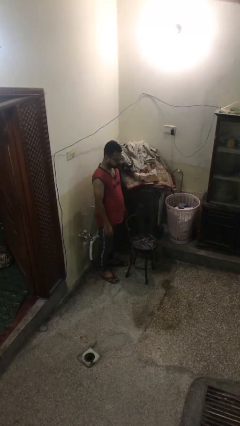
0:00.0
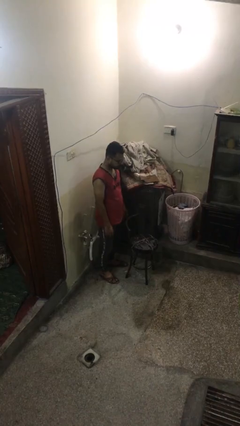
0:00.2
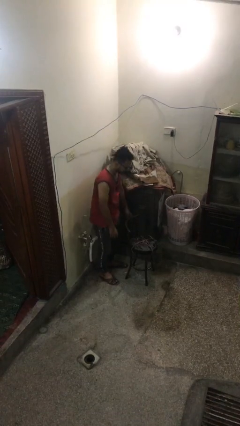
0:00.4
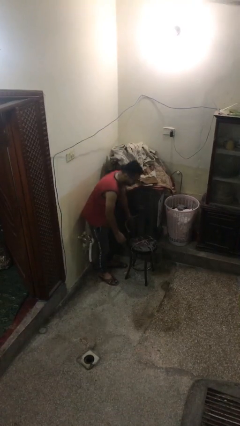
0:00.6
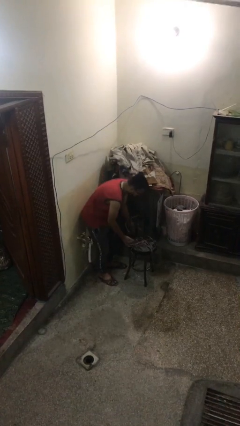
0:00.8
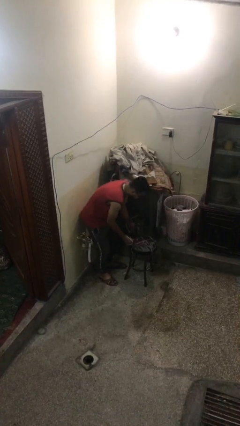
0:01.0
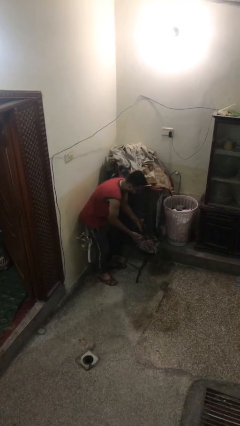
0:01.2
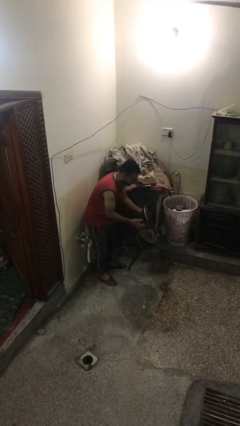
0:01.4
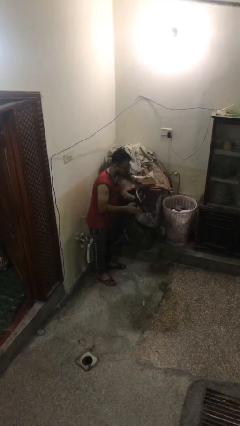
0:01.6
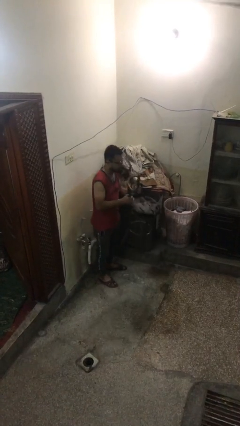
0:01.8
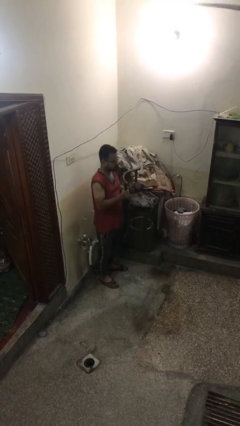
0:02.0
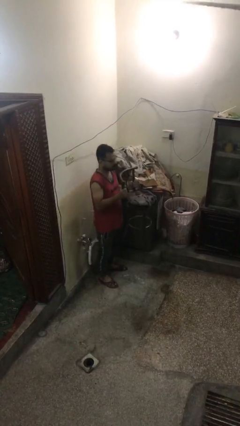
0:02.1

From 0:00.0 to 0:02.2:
person picks up object from floor

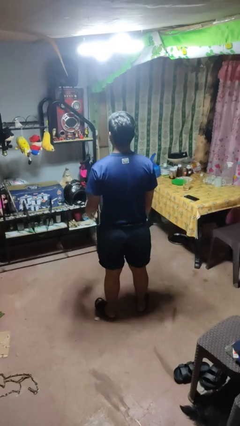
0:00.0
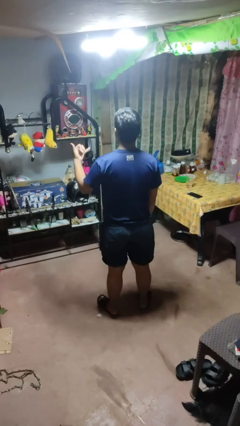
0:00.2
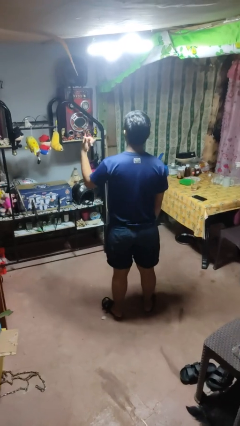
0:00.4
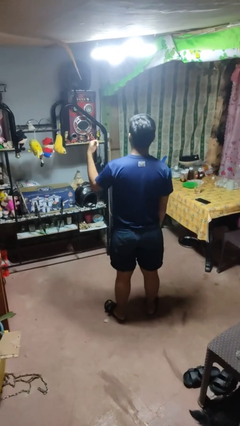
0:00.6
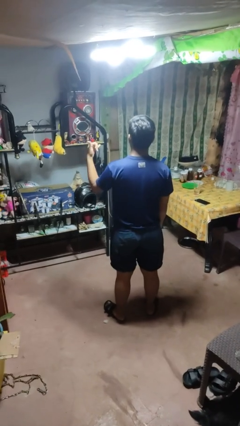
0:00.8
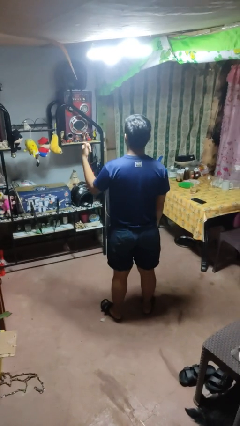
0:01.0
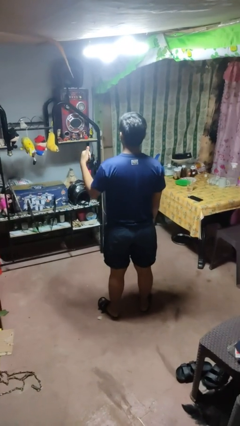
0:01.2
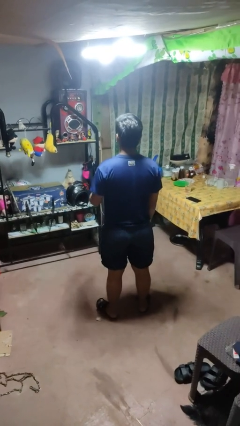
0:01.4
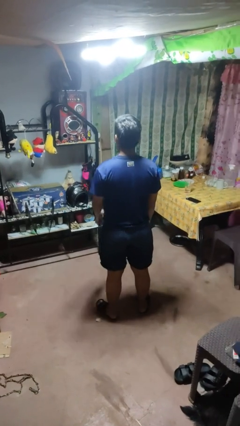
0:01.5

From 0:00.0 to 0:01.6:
person gestures hang loose

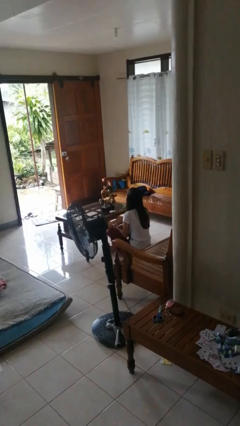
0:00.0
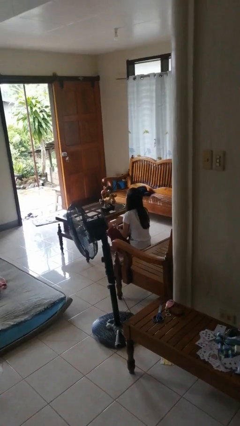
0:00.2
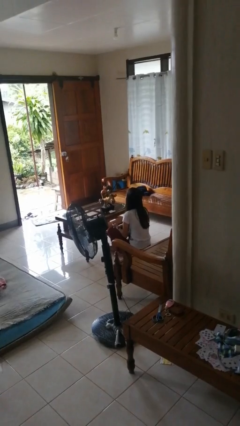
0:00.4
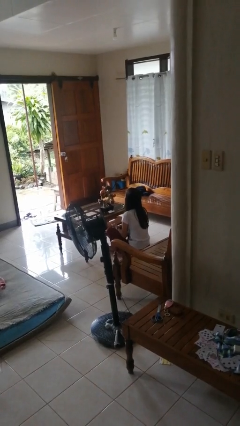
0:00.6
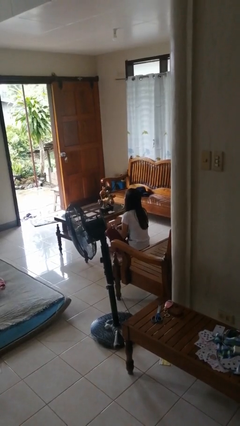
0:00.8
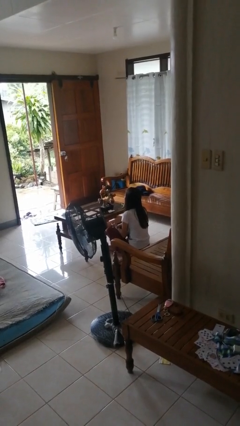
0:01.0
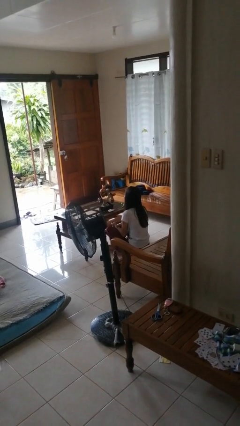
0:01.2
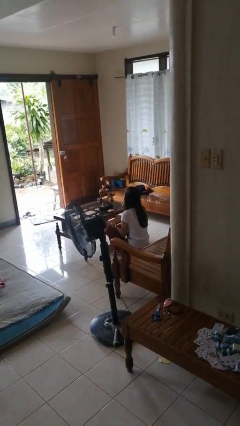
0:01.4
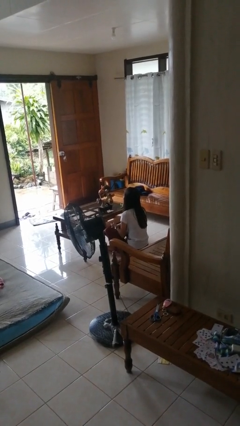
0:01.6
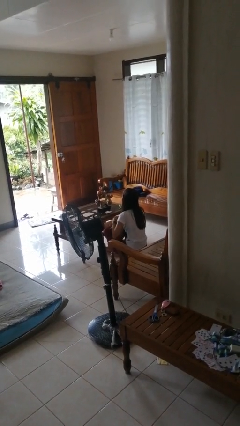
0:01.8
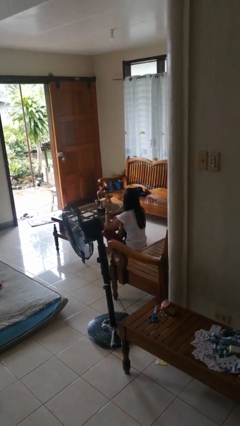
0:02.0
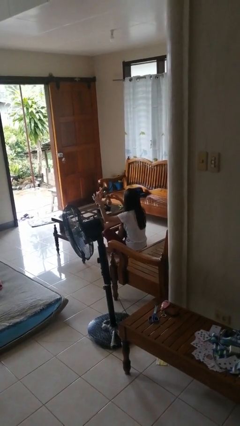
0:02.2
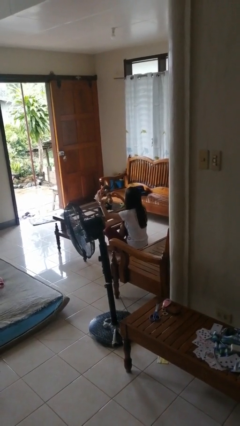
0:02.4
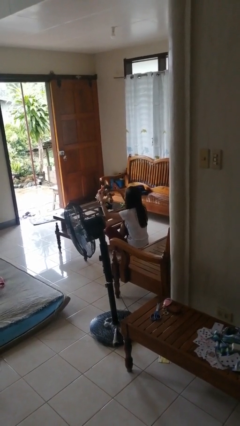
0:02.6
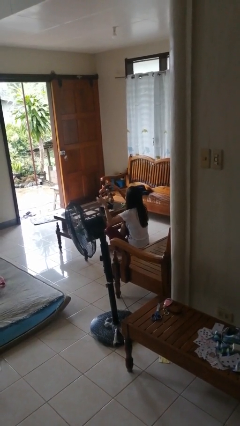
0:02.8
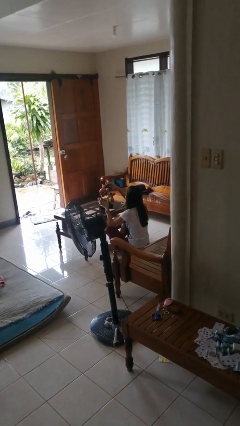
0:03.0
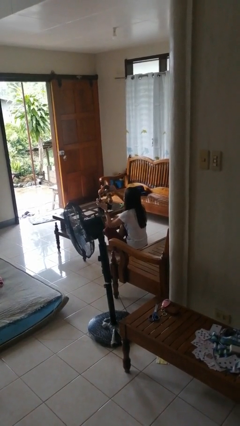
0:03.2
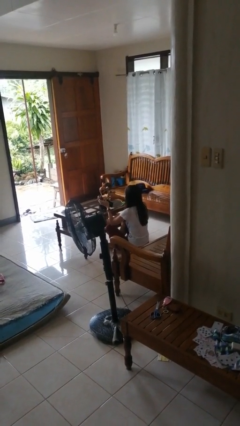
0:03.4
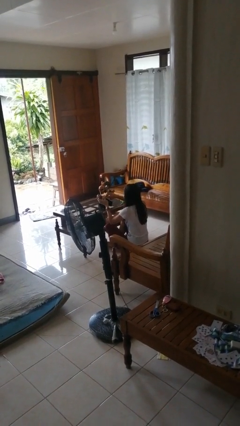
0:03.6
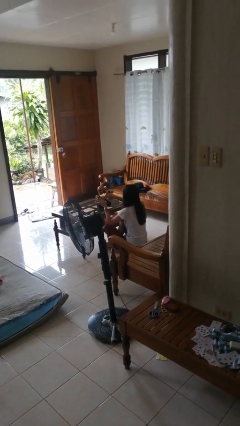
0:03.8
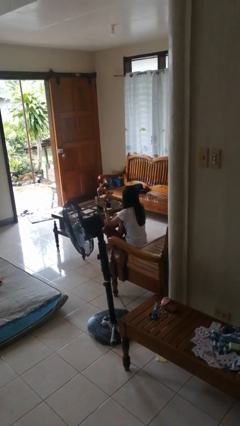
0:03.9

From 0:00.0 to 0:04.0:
person arranges flowers in vase

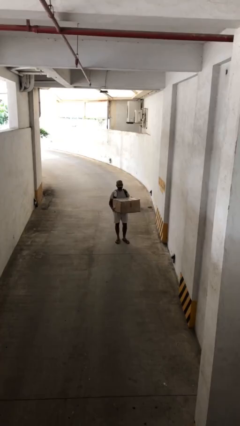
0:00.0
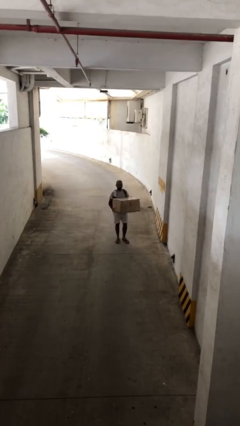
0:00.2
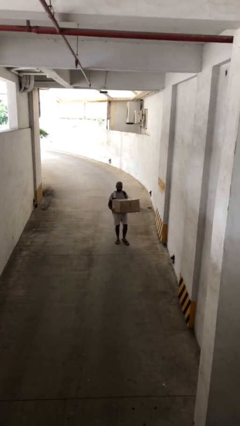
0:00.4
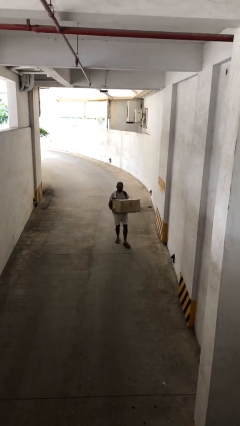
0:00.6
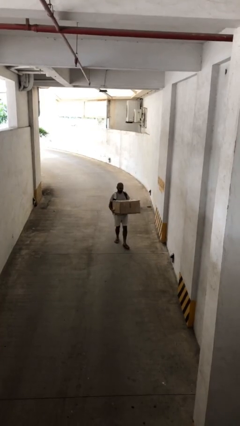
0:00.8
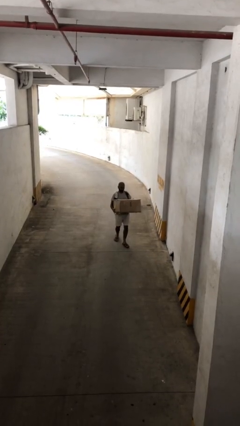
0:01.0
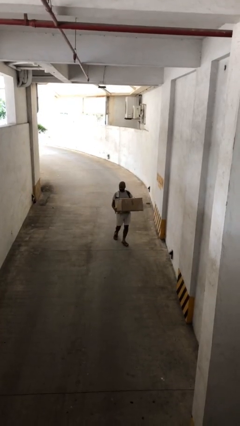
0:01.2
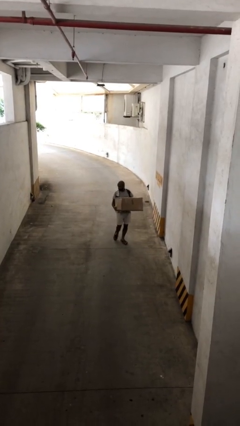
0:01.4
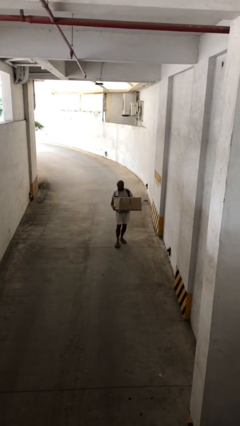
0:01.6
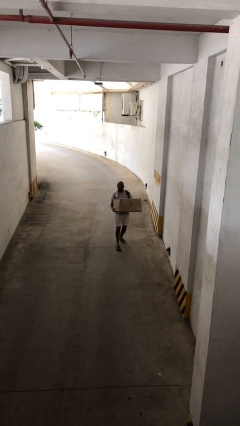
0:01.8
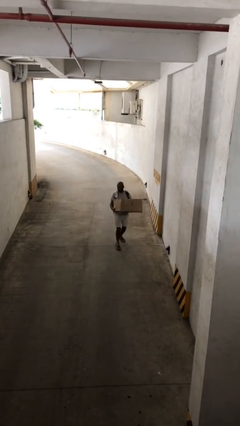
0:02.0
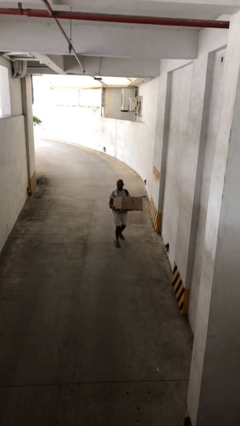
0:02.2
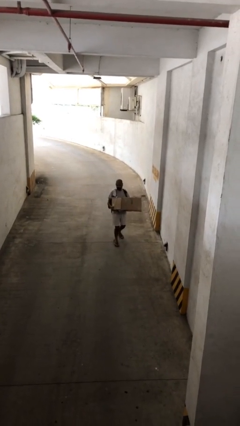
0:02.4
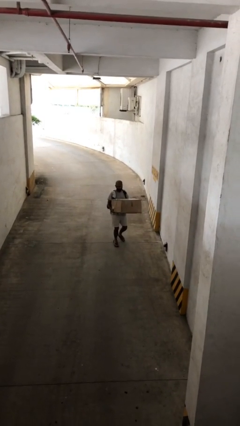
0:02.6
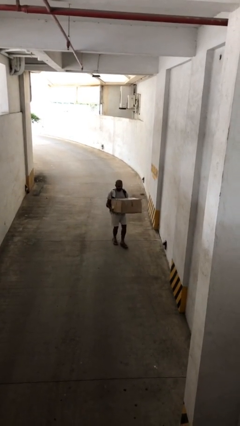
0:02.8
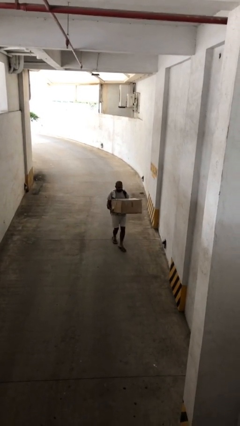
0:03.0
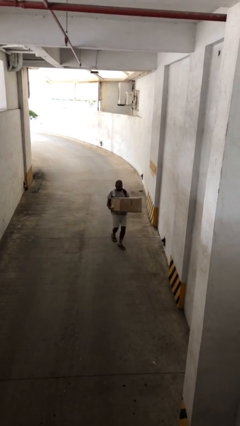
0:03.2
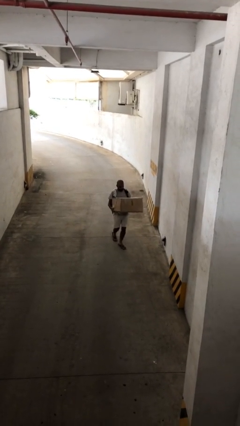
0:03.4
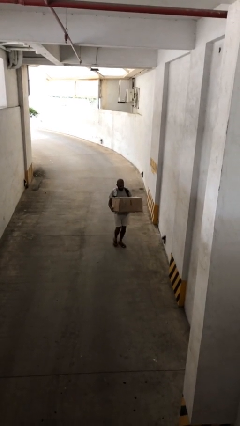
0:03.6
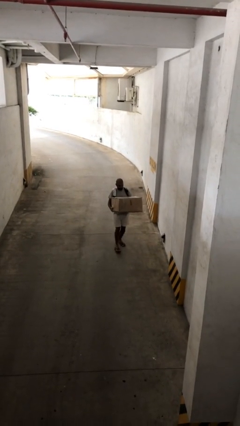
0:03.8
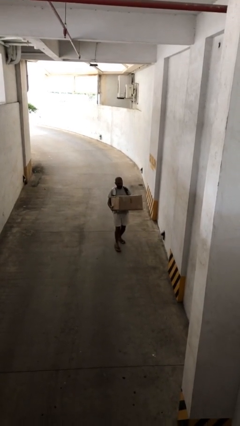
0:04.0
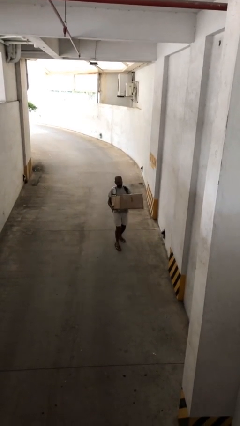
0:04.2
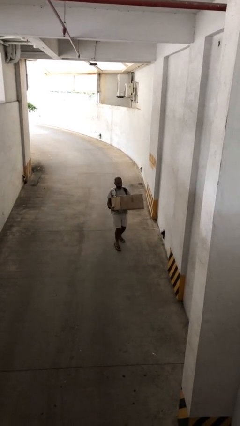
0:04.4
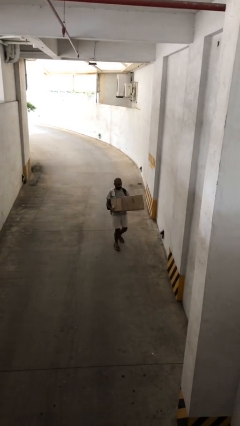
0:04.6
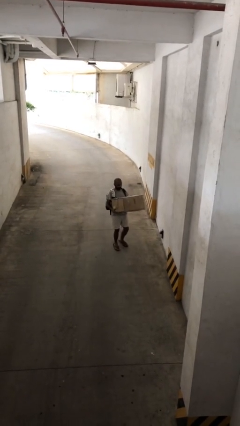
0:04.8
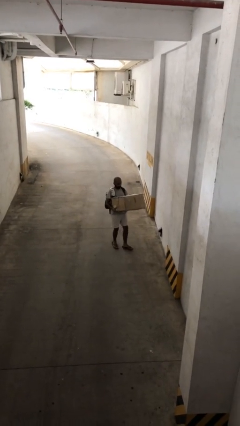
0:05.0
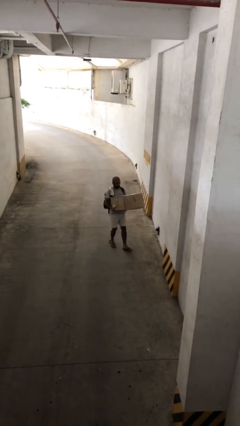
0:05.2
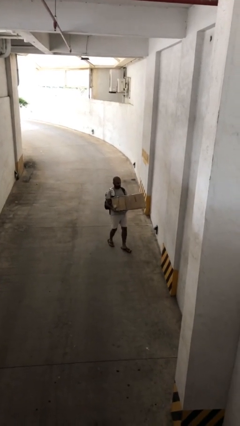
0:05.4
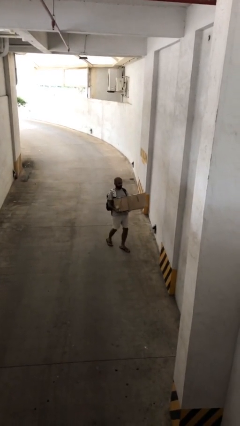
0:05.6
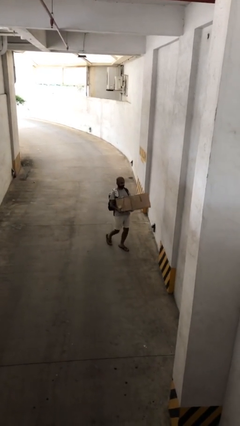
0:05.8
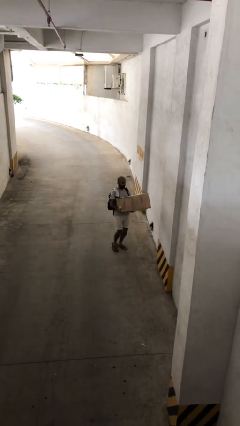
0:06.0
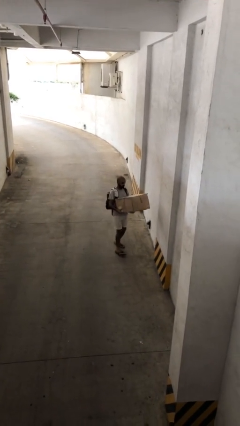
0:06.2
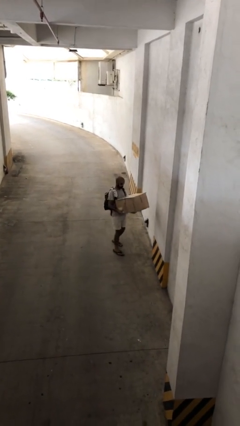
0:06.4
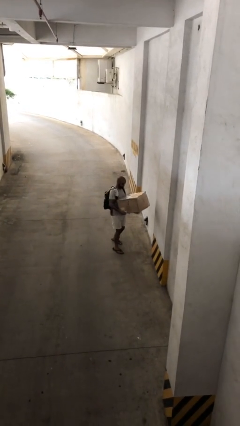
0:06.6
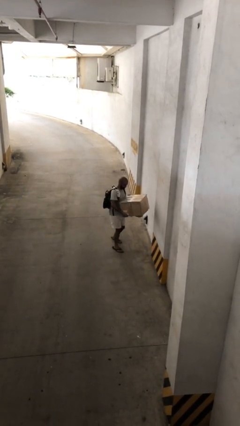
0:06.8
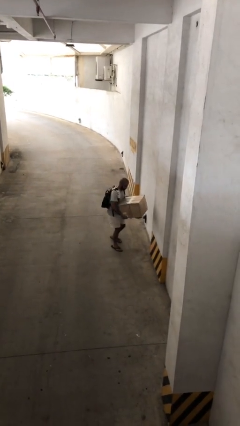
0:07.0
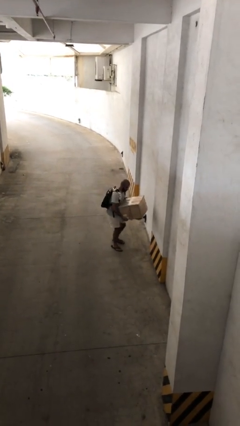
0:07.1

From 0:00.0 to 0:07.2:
person carries heavy object

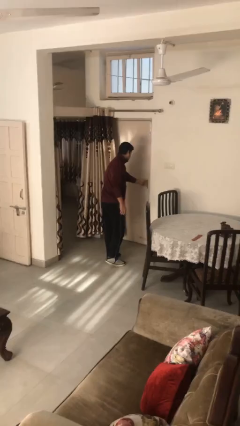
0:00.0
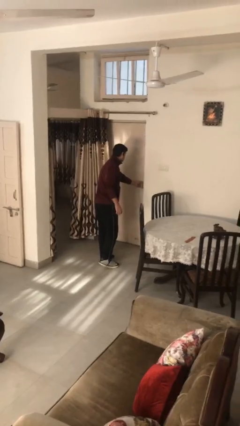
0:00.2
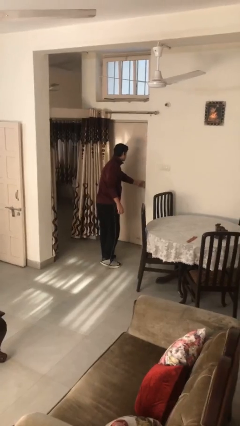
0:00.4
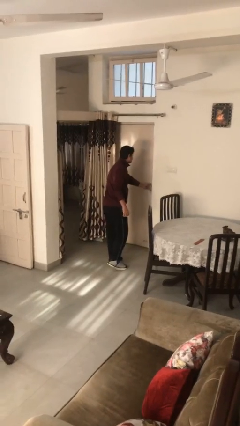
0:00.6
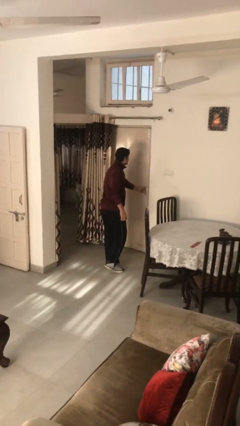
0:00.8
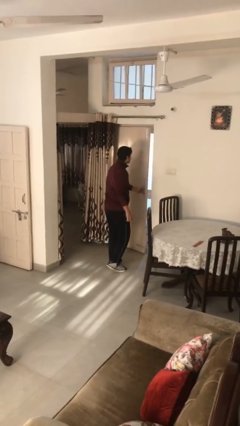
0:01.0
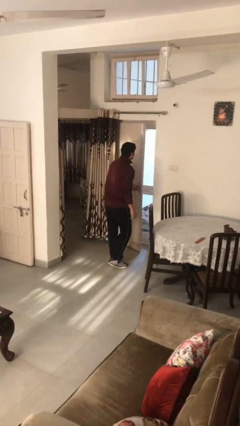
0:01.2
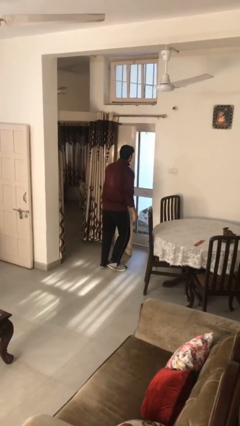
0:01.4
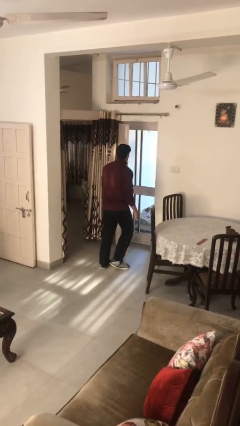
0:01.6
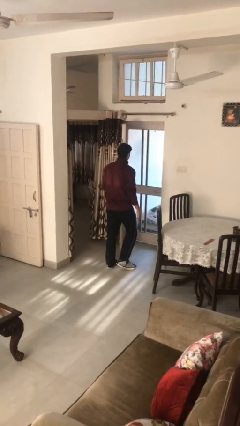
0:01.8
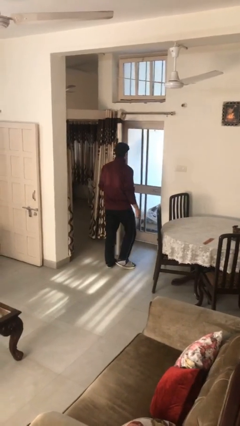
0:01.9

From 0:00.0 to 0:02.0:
person opens facility door

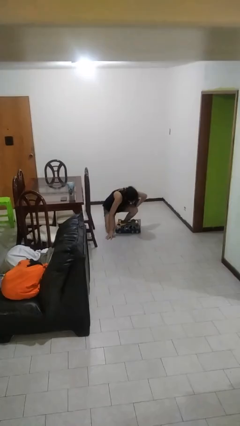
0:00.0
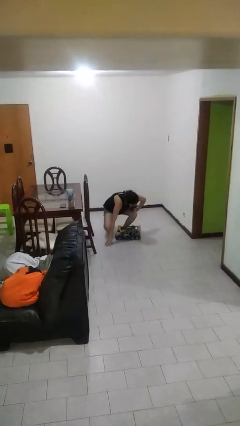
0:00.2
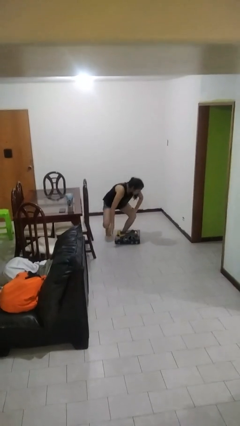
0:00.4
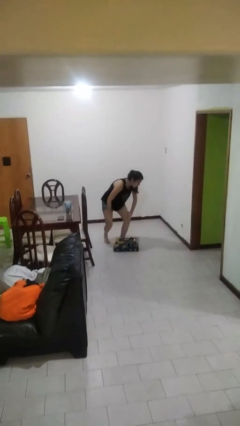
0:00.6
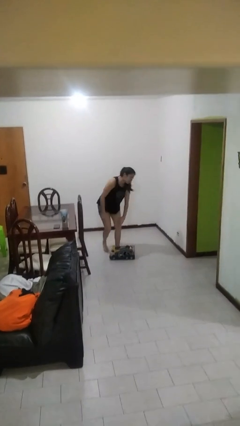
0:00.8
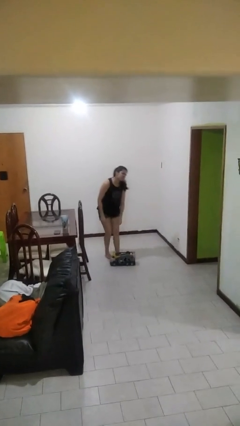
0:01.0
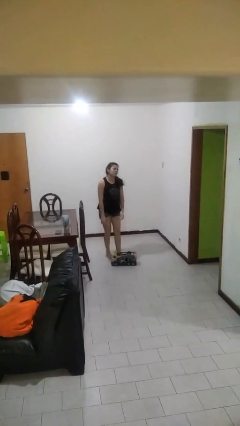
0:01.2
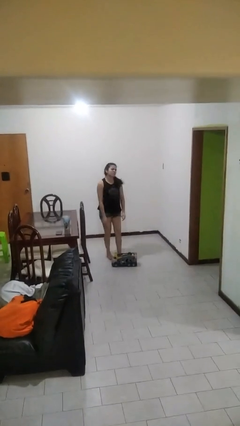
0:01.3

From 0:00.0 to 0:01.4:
person stands up from floor
